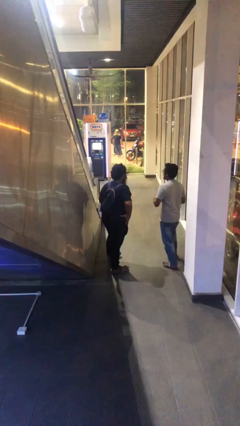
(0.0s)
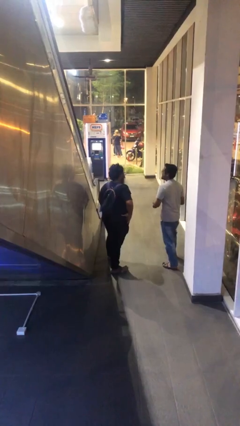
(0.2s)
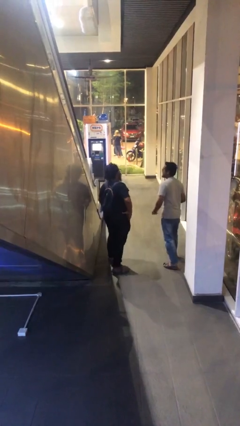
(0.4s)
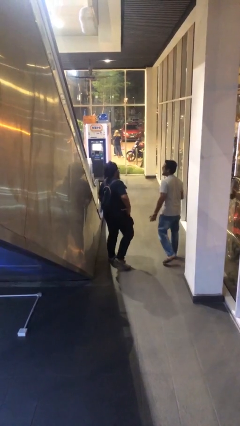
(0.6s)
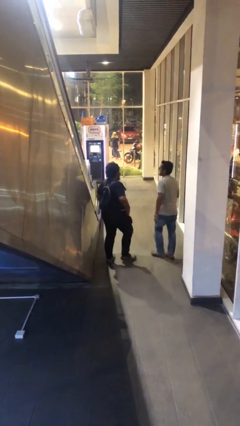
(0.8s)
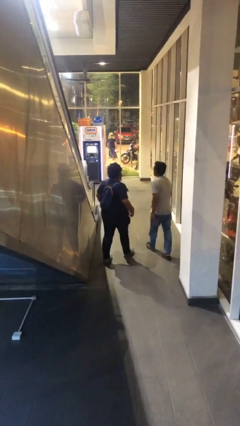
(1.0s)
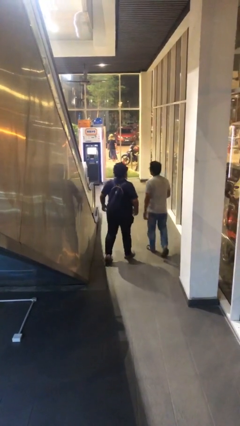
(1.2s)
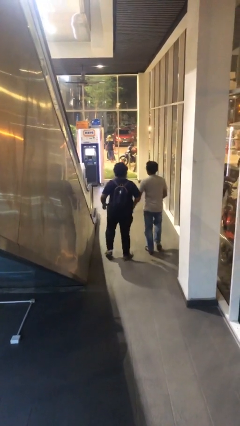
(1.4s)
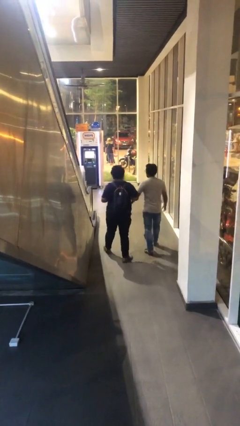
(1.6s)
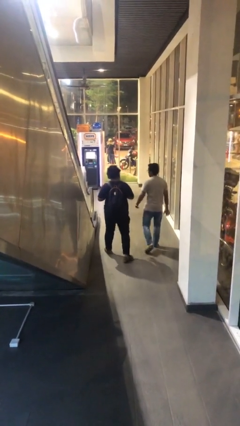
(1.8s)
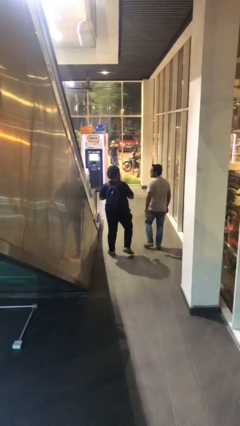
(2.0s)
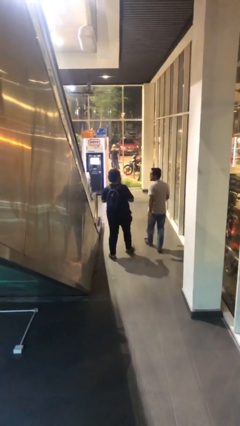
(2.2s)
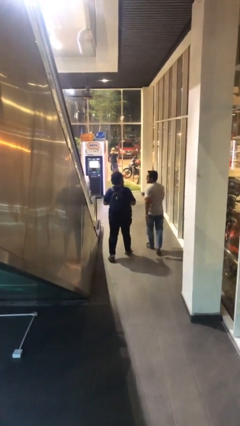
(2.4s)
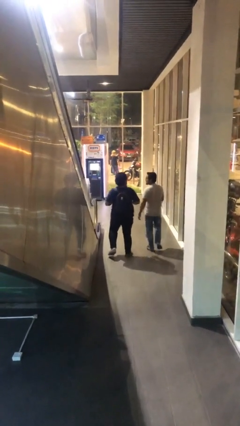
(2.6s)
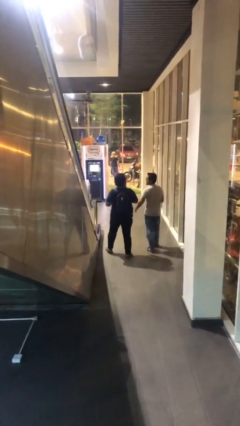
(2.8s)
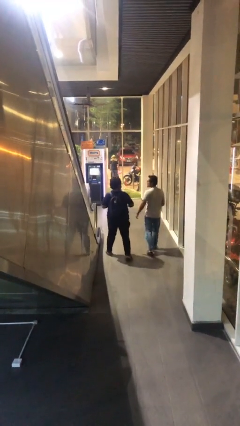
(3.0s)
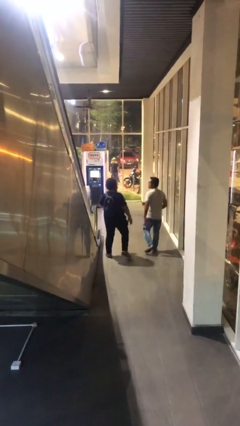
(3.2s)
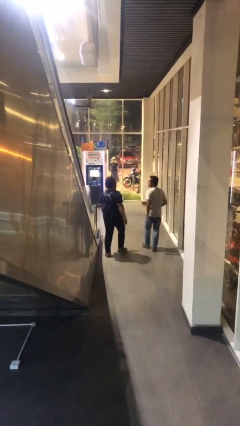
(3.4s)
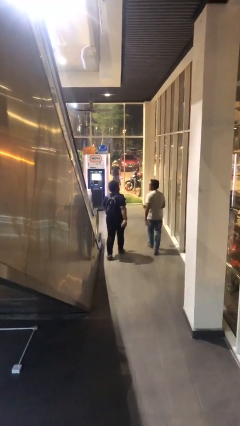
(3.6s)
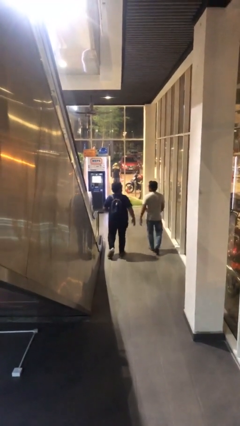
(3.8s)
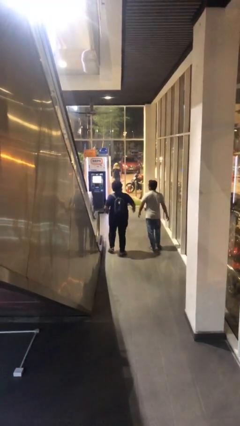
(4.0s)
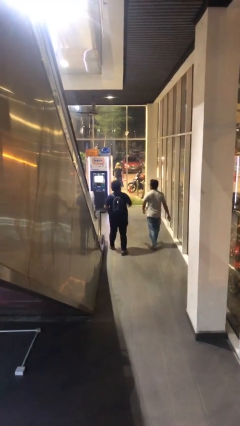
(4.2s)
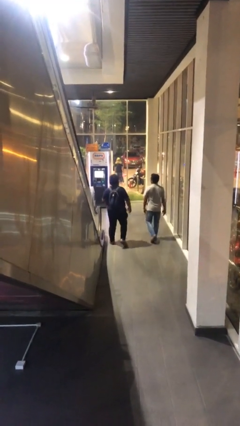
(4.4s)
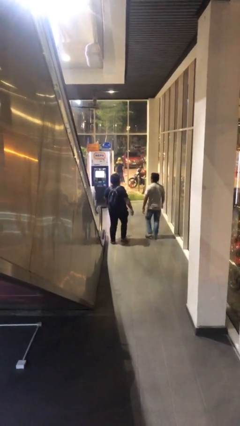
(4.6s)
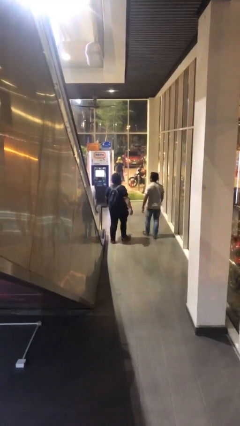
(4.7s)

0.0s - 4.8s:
person talks to person

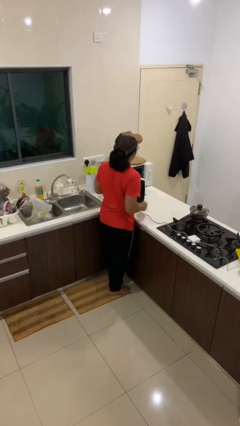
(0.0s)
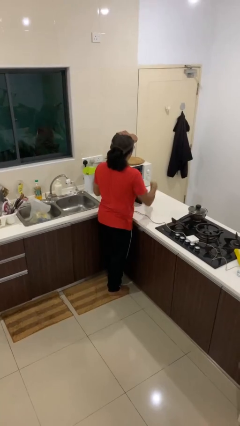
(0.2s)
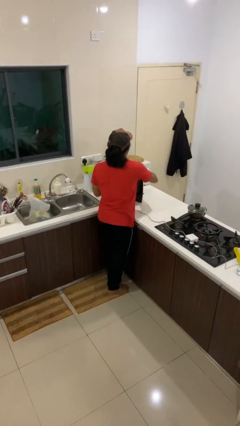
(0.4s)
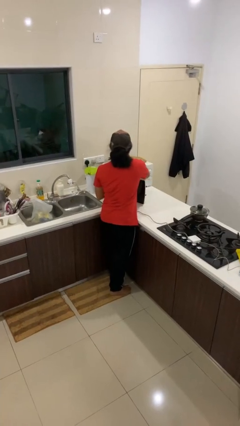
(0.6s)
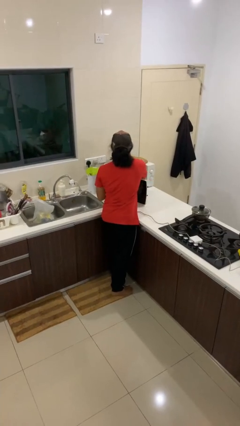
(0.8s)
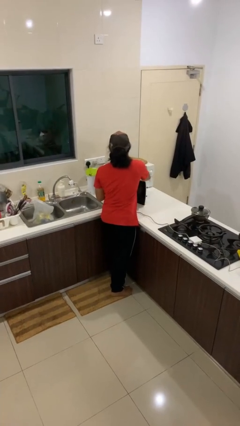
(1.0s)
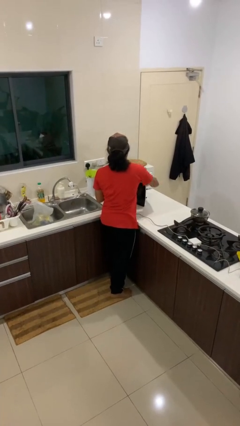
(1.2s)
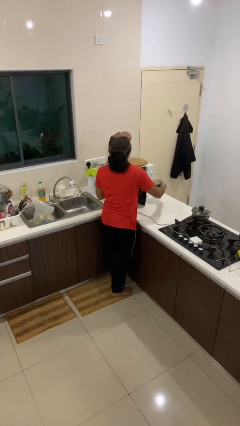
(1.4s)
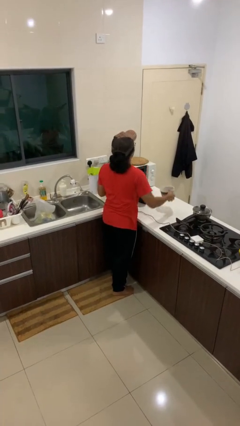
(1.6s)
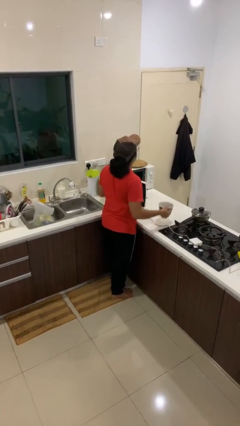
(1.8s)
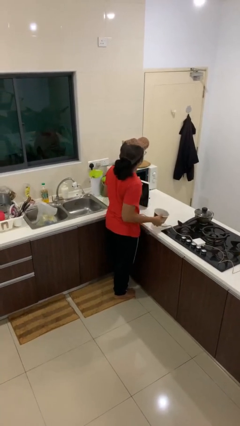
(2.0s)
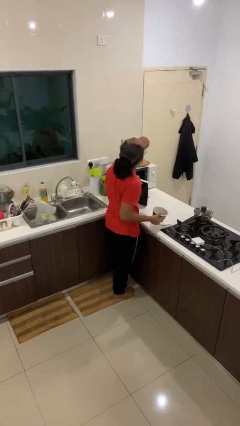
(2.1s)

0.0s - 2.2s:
person takes object from microwave

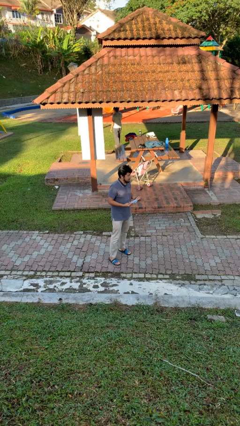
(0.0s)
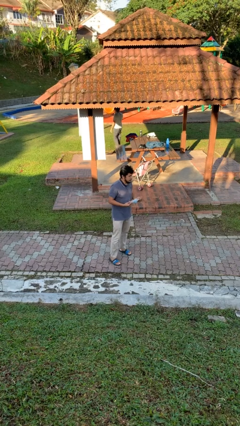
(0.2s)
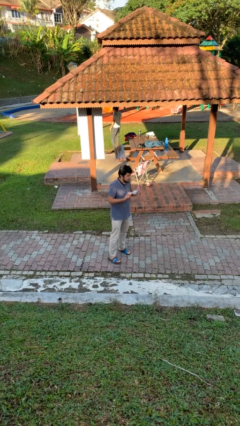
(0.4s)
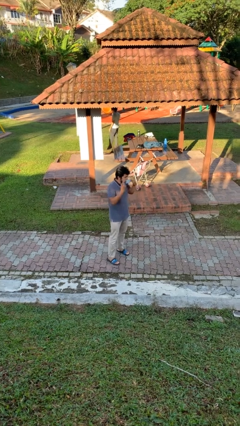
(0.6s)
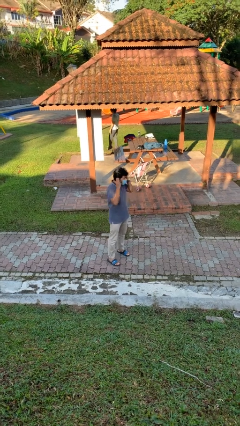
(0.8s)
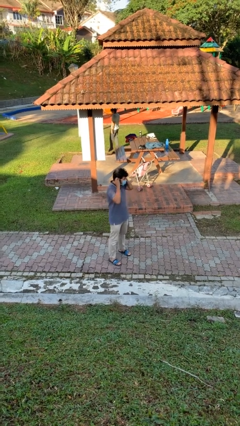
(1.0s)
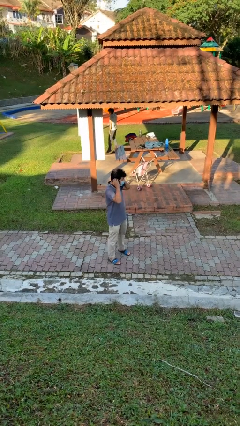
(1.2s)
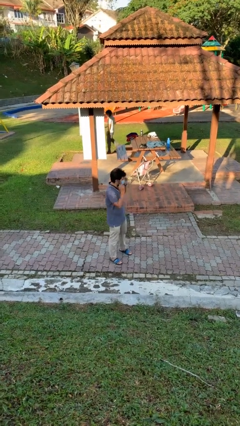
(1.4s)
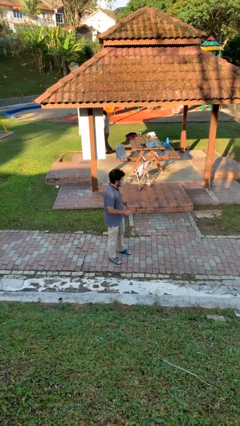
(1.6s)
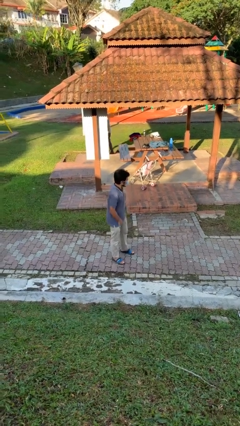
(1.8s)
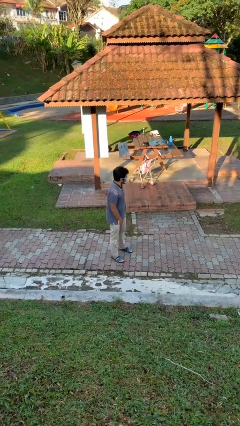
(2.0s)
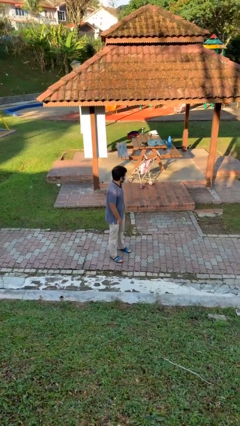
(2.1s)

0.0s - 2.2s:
person puts on facemask

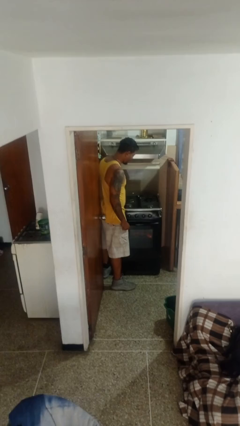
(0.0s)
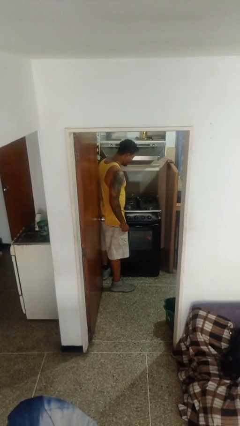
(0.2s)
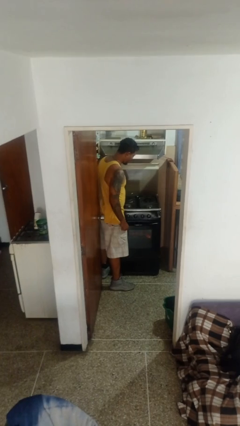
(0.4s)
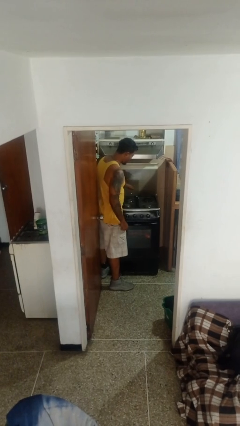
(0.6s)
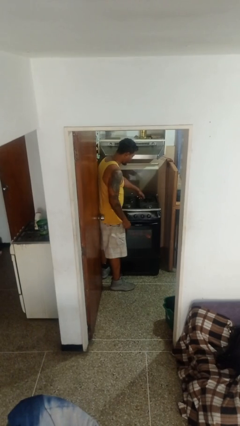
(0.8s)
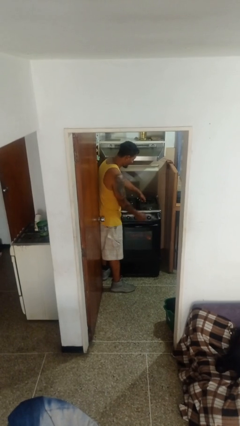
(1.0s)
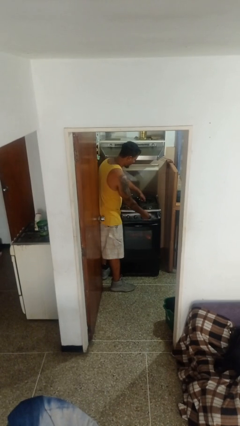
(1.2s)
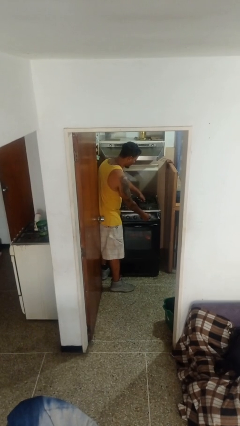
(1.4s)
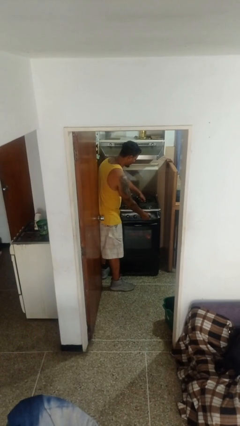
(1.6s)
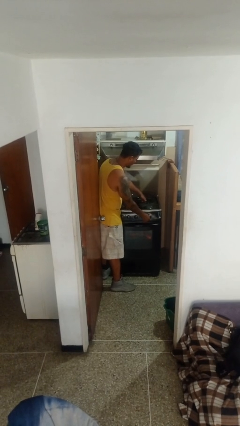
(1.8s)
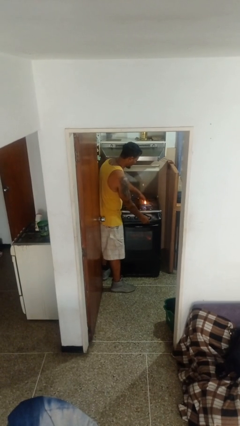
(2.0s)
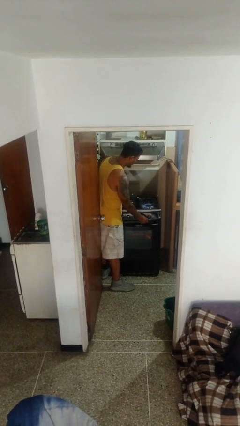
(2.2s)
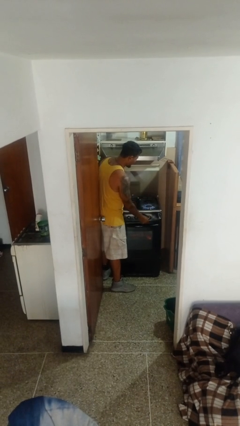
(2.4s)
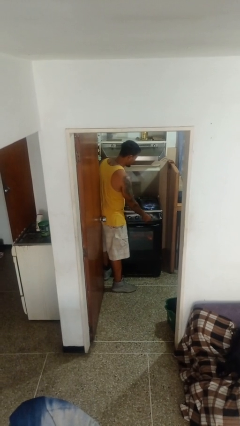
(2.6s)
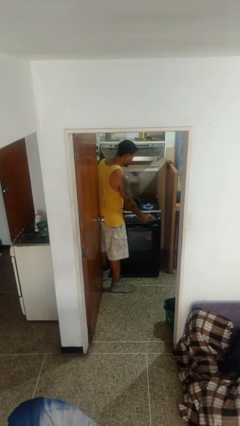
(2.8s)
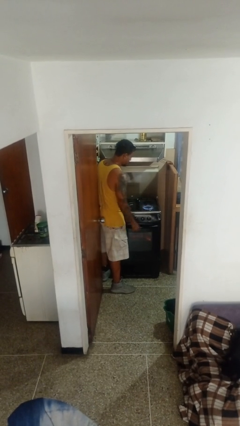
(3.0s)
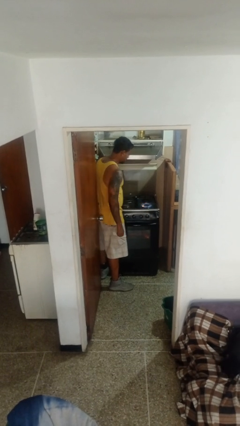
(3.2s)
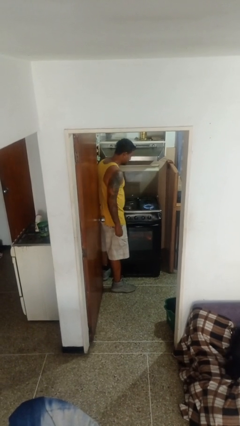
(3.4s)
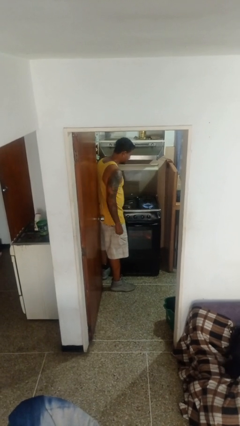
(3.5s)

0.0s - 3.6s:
person turns on stovetop

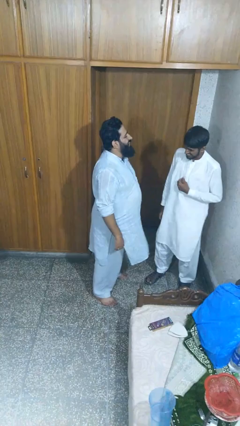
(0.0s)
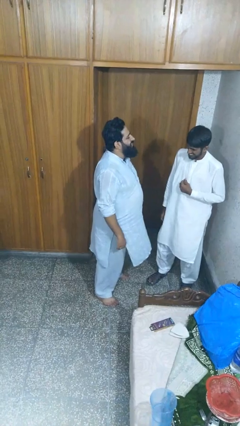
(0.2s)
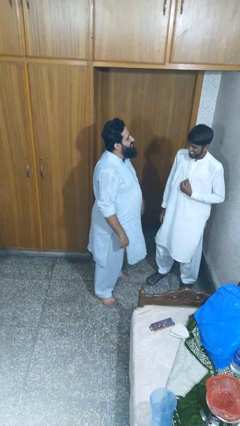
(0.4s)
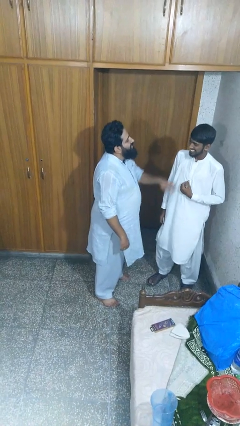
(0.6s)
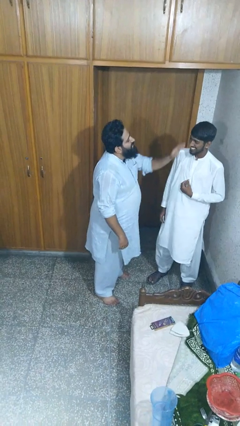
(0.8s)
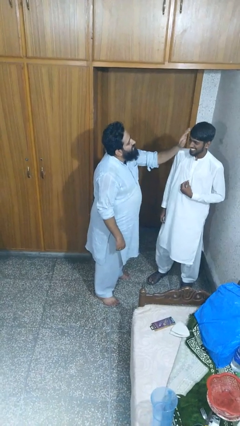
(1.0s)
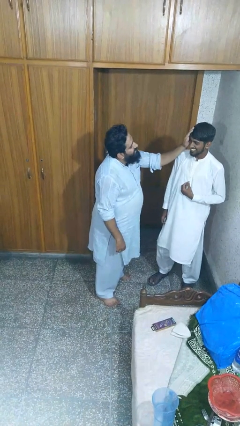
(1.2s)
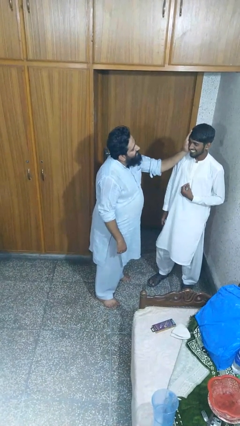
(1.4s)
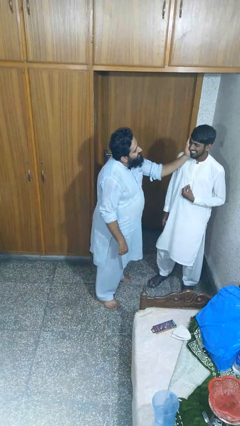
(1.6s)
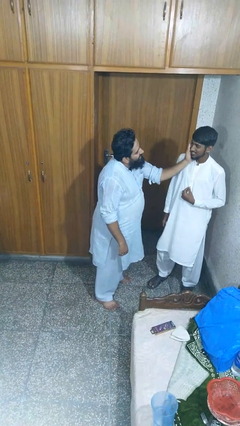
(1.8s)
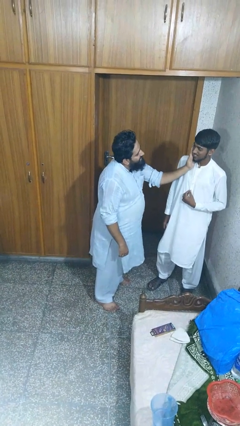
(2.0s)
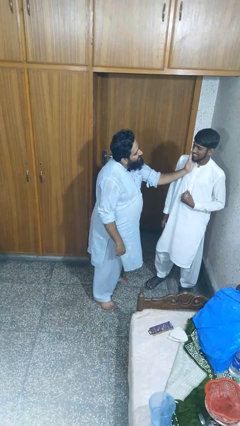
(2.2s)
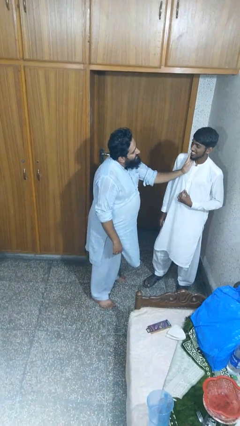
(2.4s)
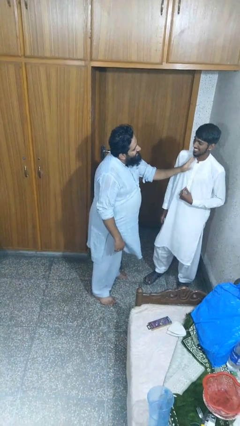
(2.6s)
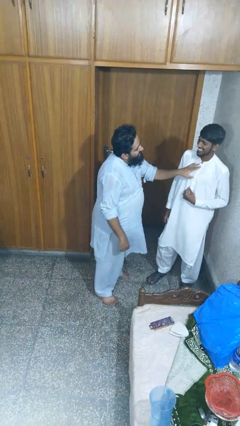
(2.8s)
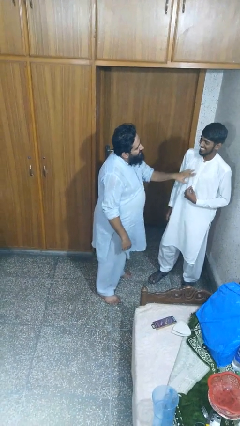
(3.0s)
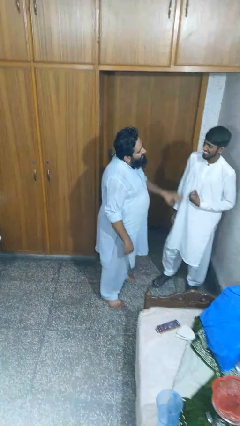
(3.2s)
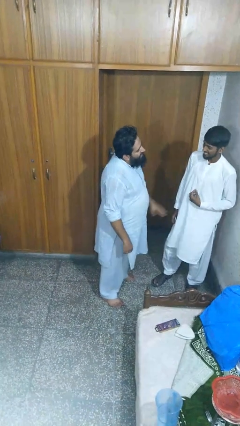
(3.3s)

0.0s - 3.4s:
person touches face of person

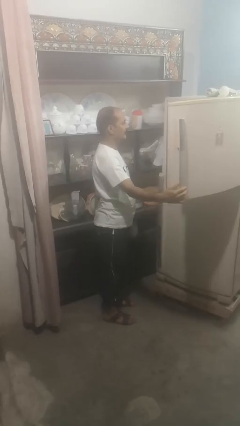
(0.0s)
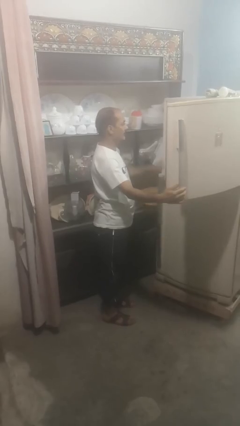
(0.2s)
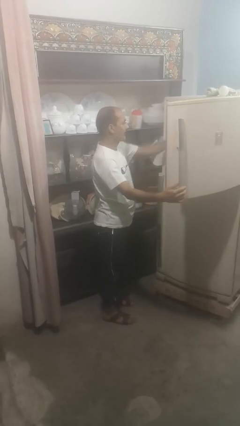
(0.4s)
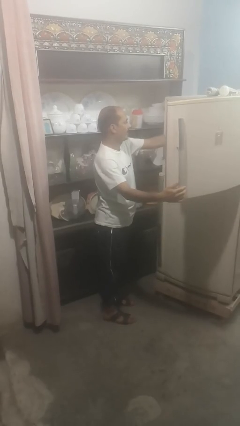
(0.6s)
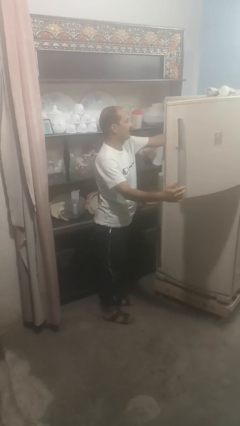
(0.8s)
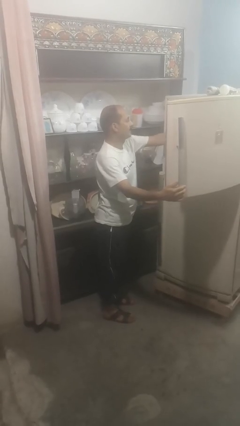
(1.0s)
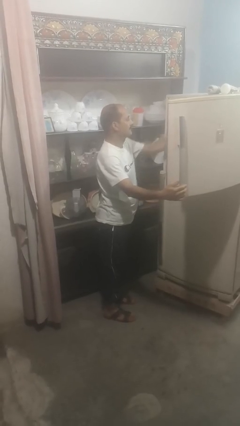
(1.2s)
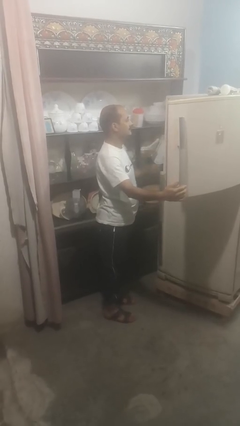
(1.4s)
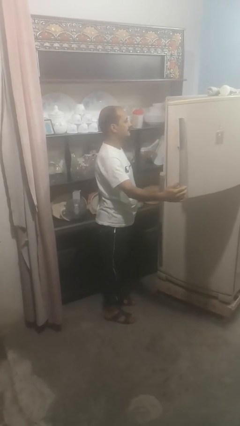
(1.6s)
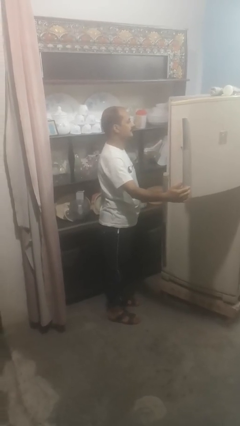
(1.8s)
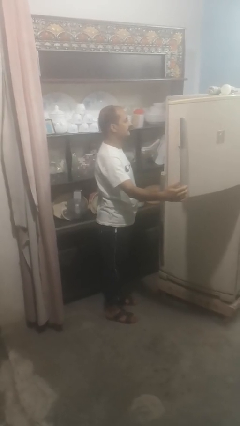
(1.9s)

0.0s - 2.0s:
person puts object into refrigerator
